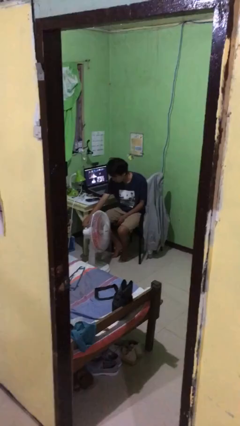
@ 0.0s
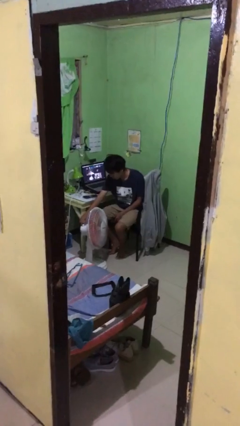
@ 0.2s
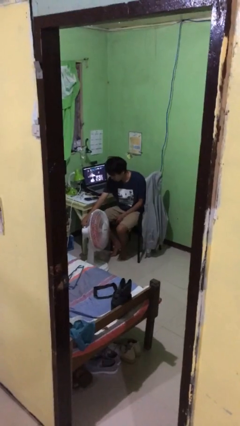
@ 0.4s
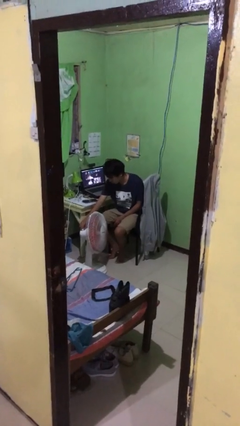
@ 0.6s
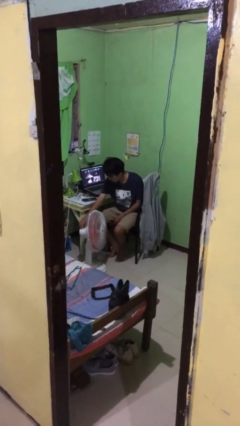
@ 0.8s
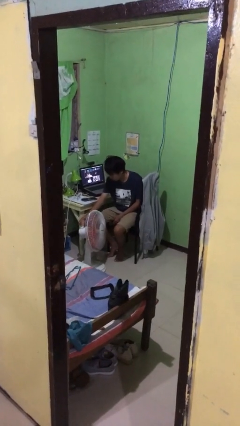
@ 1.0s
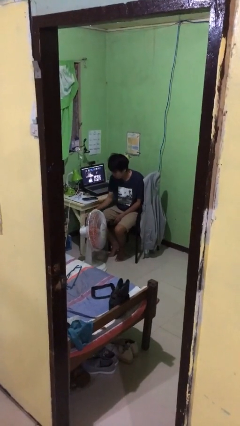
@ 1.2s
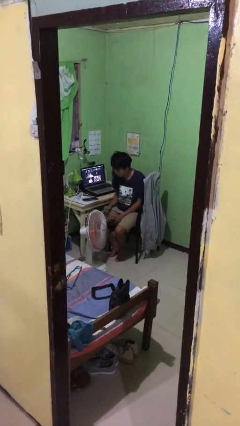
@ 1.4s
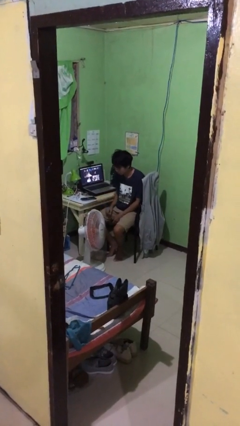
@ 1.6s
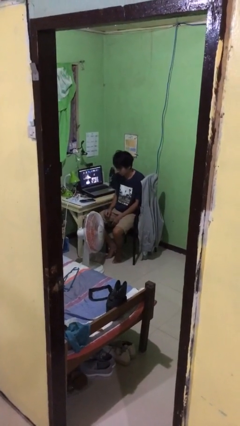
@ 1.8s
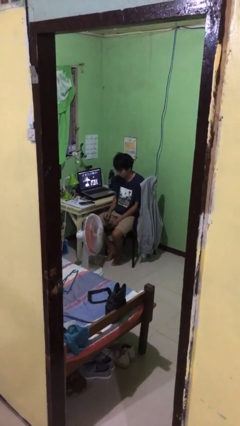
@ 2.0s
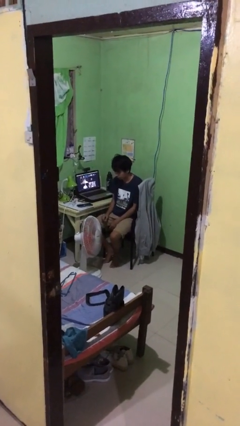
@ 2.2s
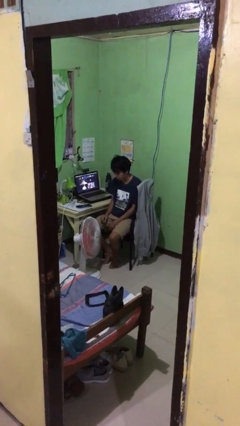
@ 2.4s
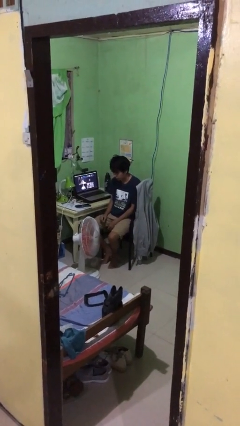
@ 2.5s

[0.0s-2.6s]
person turns off fan

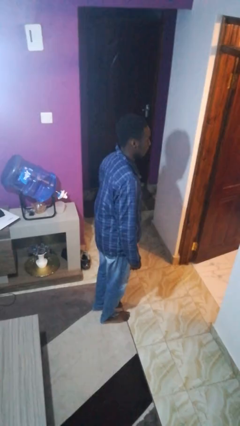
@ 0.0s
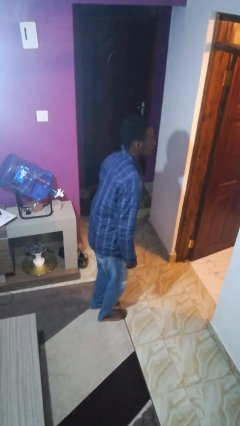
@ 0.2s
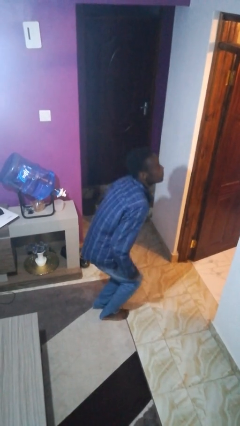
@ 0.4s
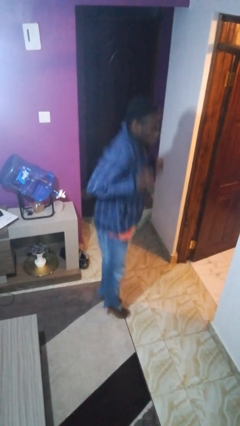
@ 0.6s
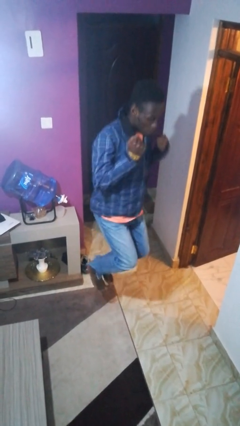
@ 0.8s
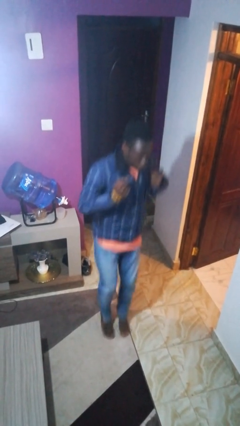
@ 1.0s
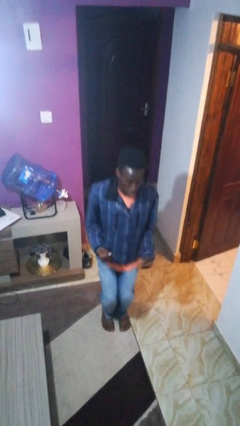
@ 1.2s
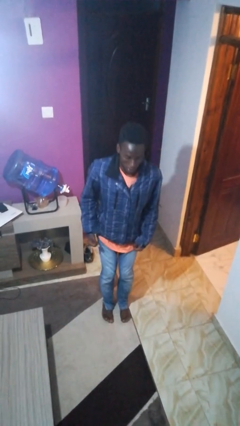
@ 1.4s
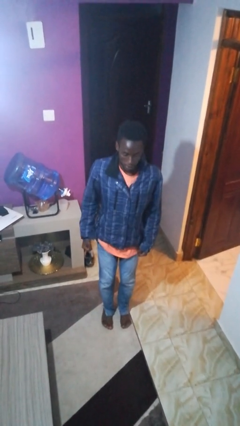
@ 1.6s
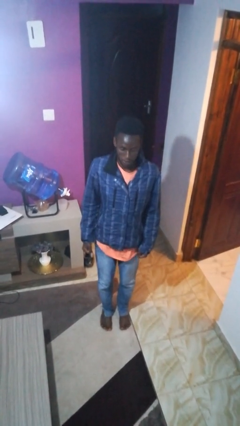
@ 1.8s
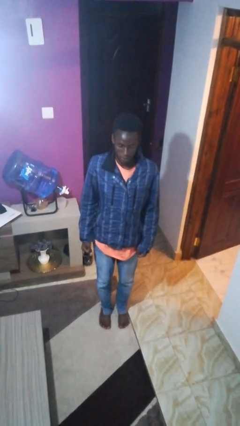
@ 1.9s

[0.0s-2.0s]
person jumps

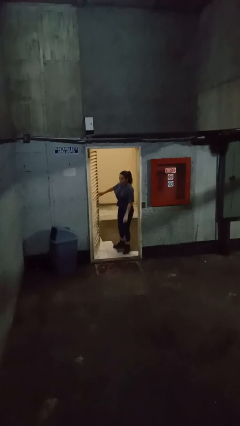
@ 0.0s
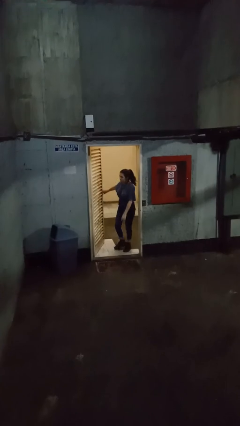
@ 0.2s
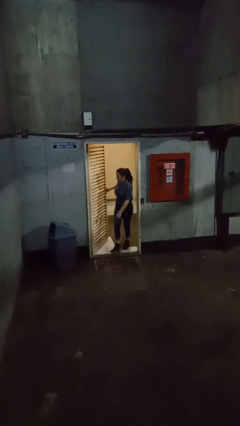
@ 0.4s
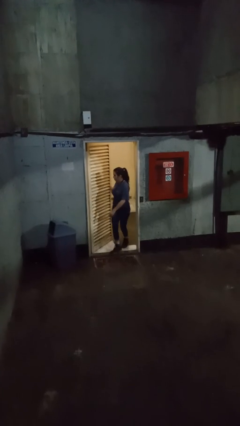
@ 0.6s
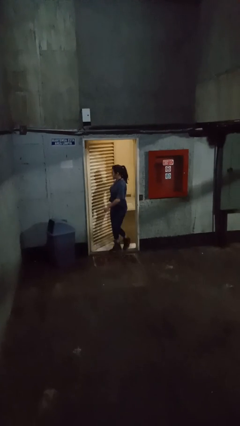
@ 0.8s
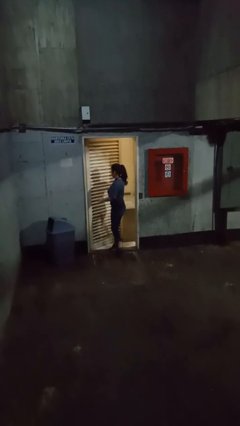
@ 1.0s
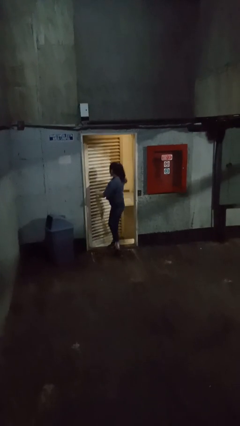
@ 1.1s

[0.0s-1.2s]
person closes facility door

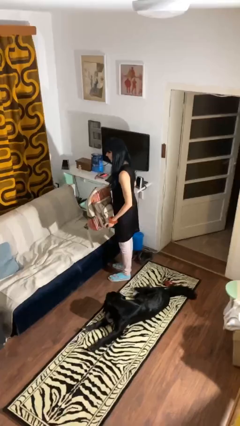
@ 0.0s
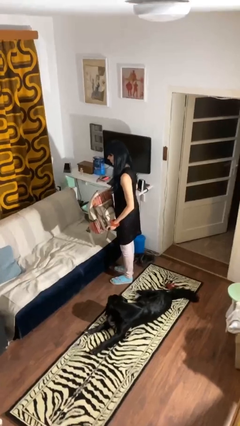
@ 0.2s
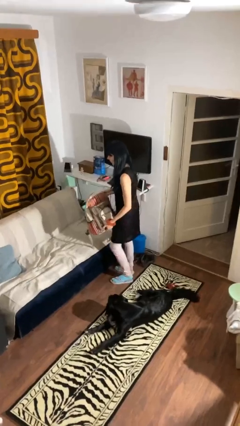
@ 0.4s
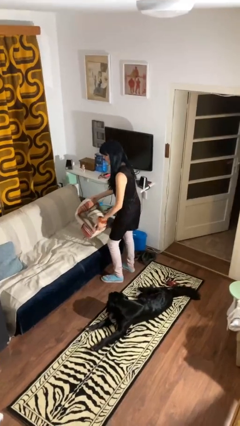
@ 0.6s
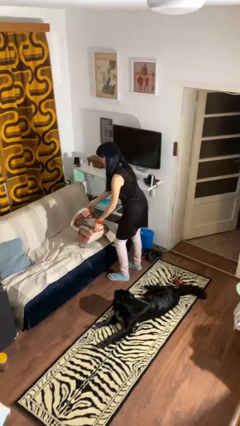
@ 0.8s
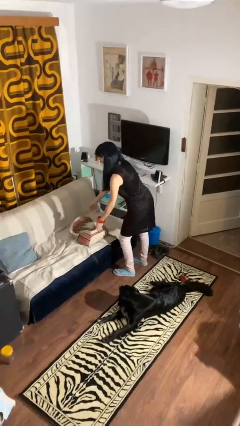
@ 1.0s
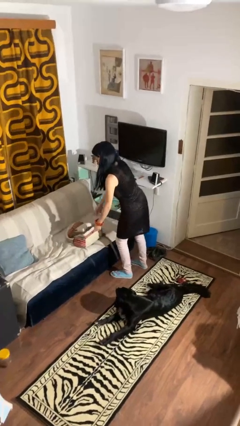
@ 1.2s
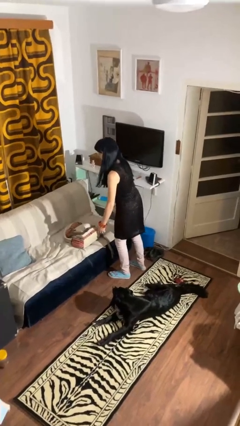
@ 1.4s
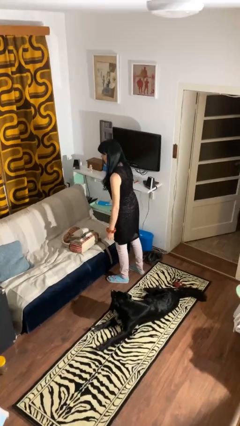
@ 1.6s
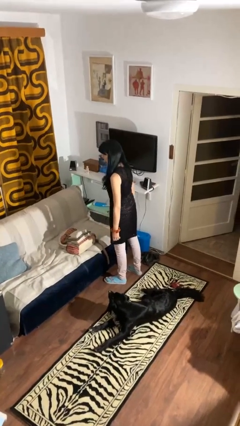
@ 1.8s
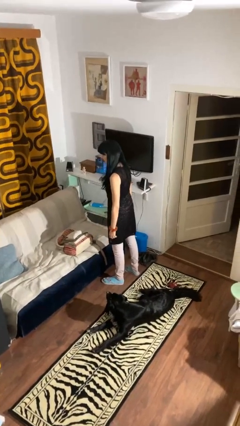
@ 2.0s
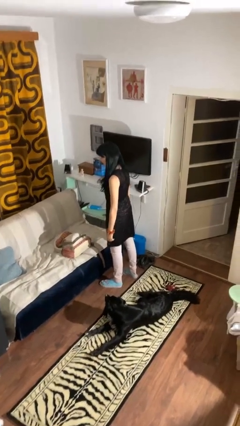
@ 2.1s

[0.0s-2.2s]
person puts down object on couch

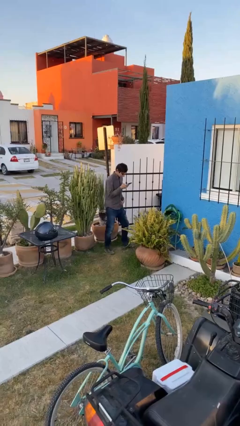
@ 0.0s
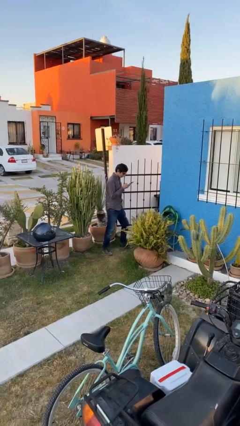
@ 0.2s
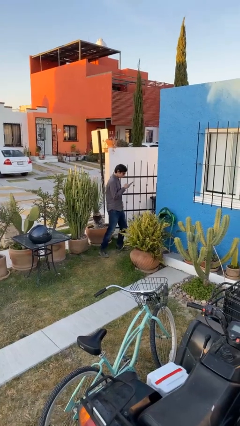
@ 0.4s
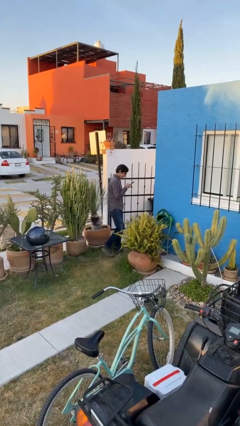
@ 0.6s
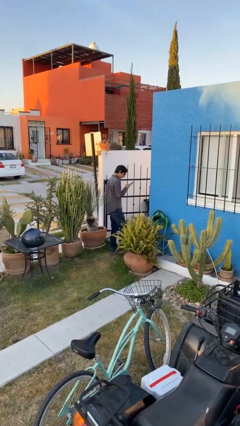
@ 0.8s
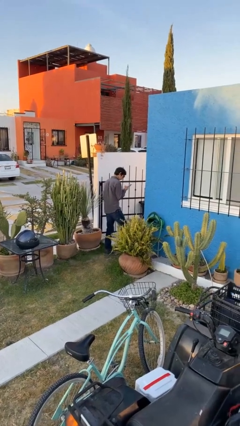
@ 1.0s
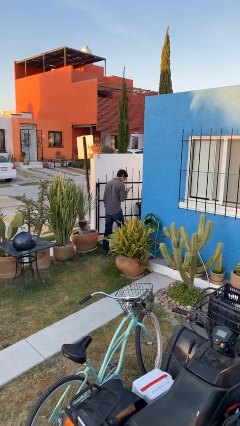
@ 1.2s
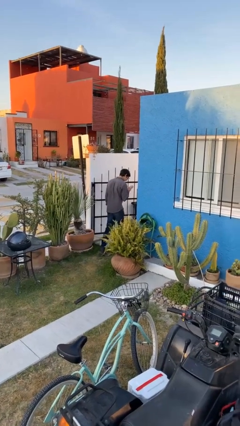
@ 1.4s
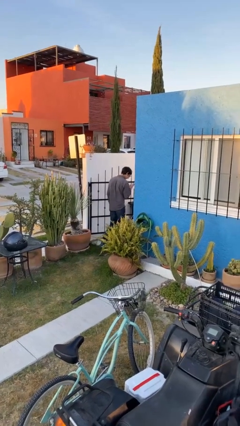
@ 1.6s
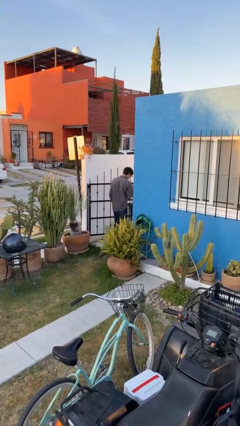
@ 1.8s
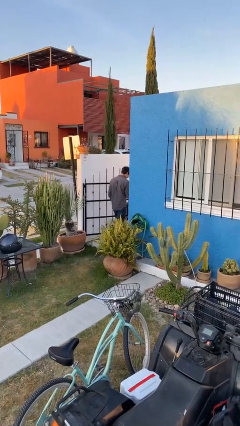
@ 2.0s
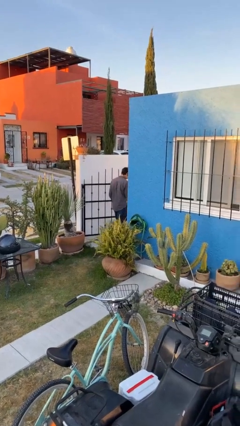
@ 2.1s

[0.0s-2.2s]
person exits scene through structure

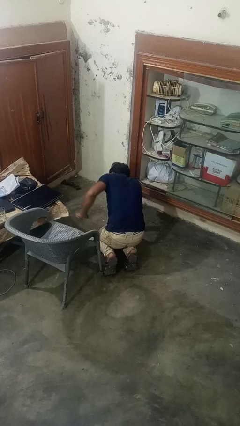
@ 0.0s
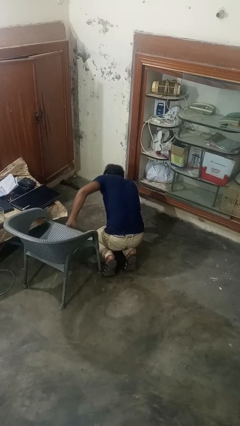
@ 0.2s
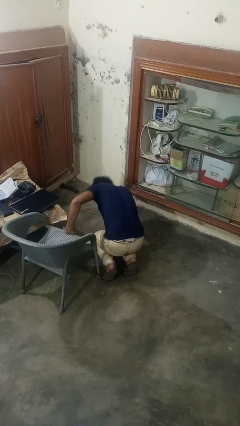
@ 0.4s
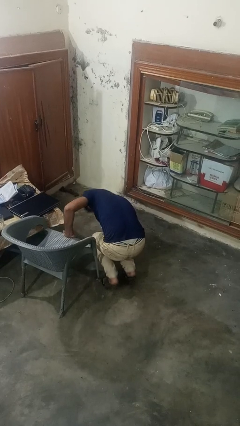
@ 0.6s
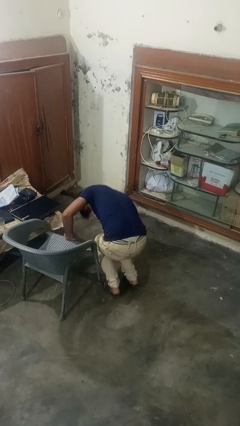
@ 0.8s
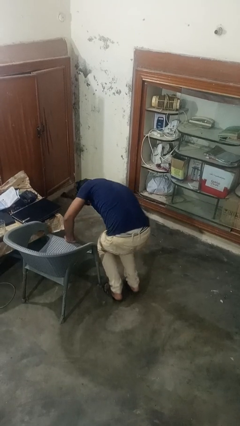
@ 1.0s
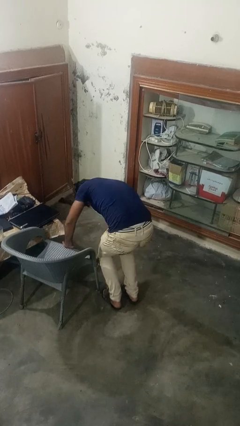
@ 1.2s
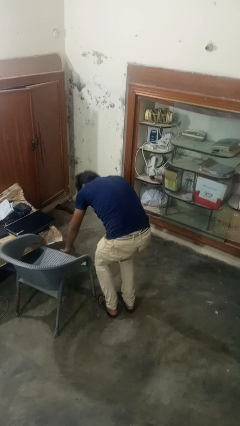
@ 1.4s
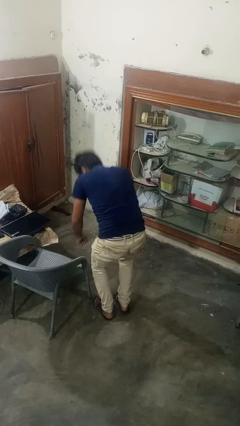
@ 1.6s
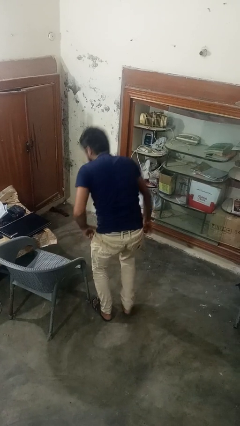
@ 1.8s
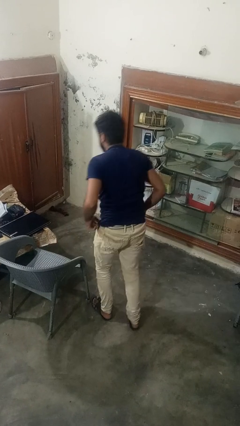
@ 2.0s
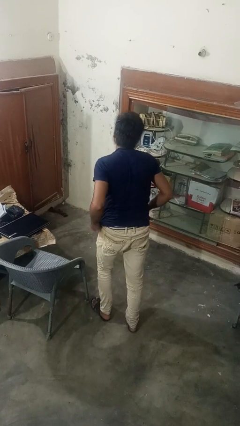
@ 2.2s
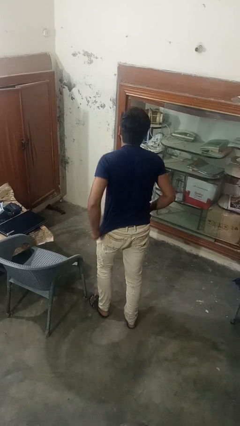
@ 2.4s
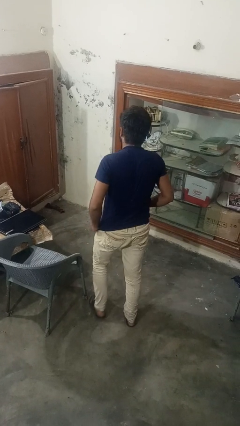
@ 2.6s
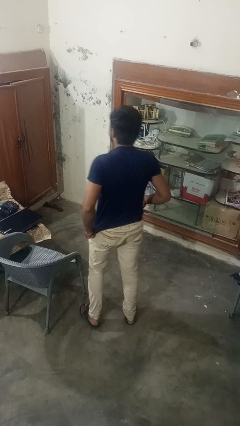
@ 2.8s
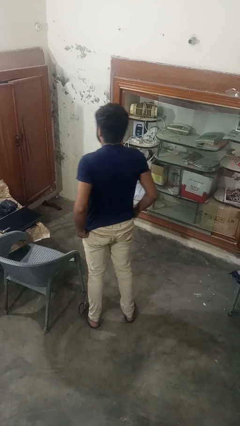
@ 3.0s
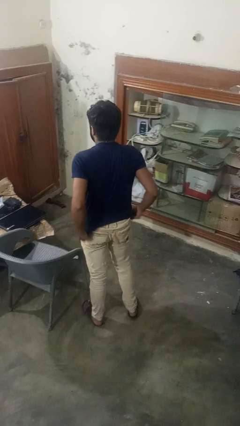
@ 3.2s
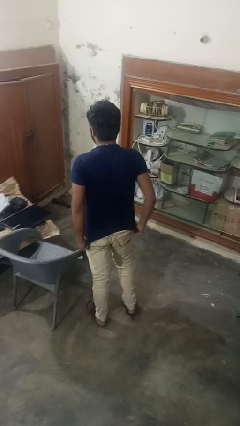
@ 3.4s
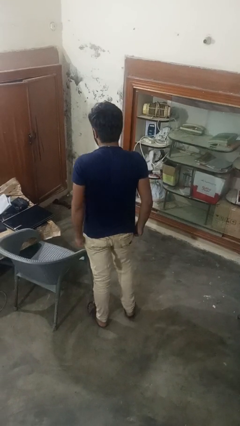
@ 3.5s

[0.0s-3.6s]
person stands up from floor

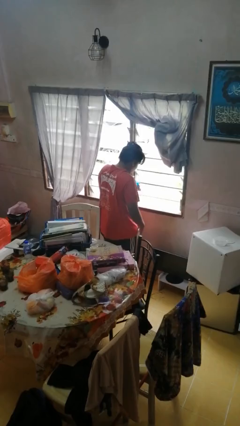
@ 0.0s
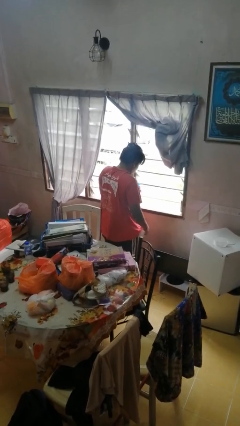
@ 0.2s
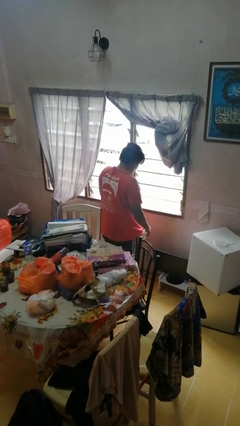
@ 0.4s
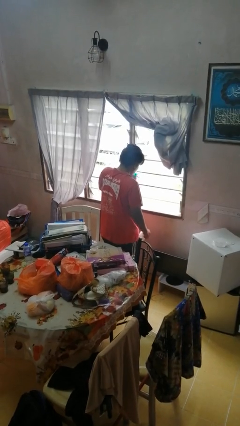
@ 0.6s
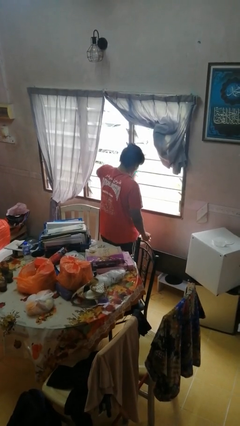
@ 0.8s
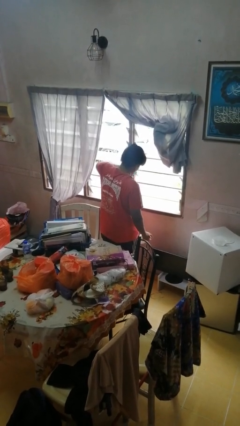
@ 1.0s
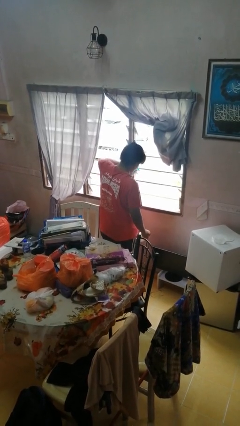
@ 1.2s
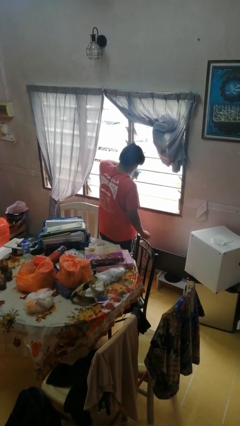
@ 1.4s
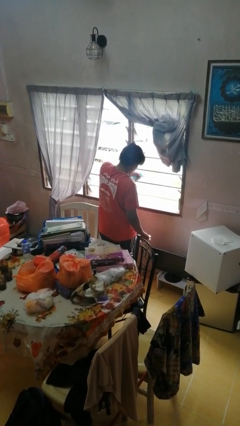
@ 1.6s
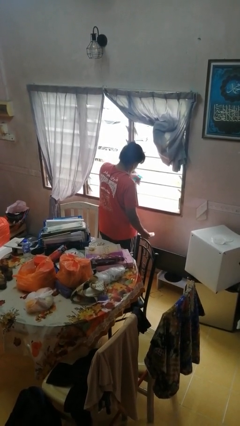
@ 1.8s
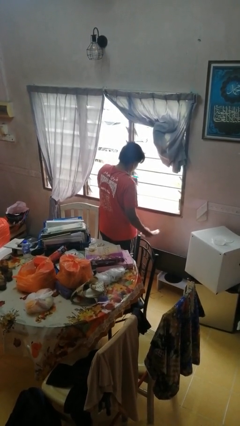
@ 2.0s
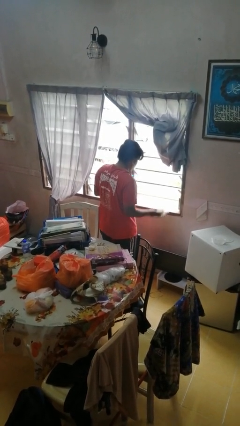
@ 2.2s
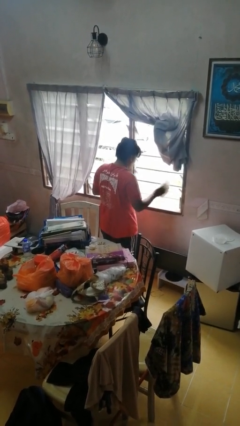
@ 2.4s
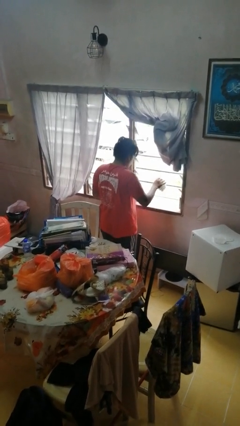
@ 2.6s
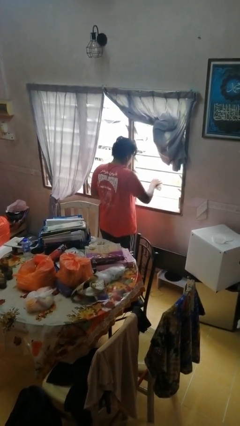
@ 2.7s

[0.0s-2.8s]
person sprays from bottle

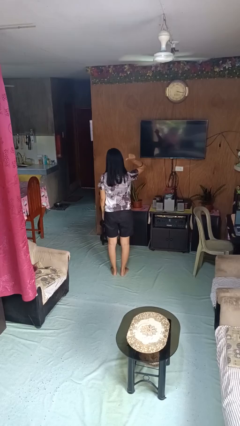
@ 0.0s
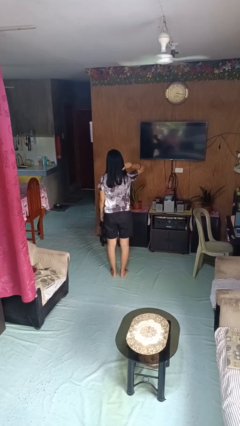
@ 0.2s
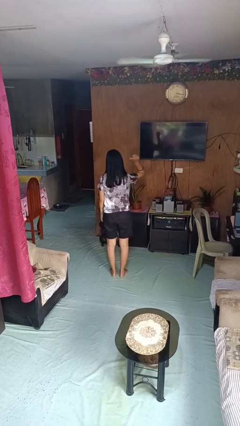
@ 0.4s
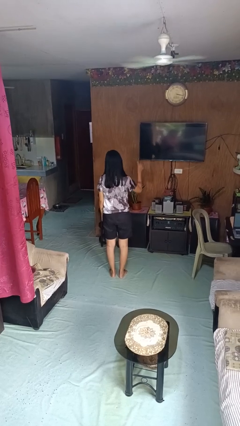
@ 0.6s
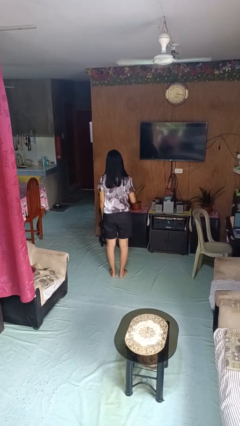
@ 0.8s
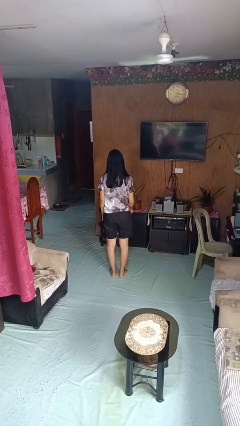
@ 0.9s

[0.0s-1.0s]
person gestures behind me
